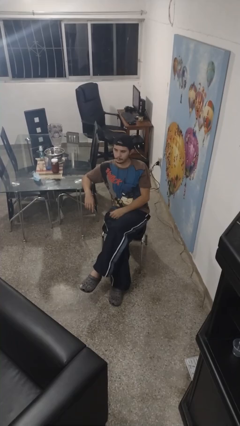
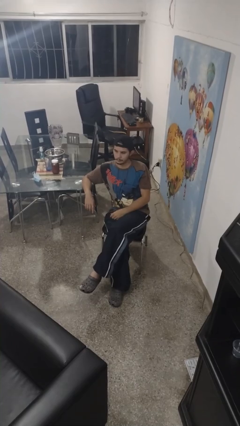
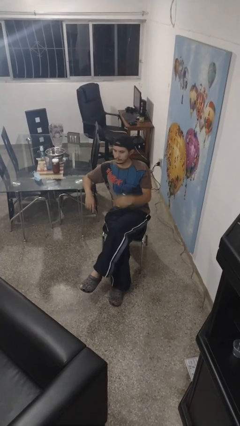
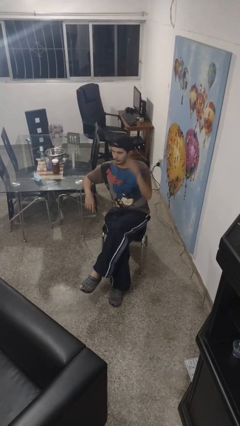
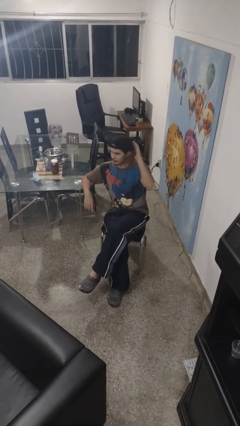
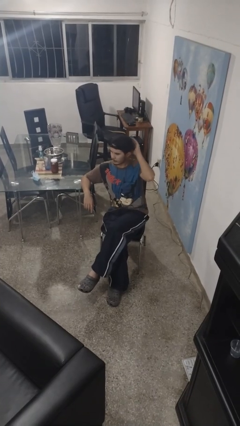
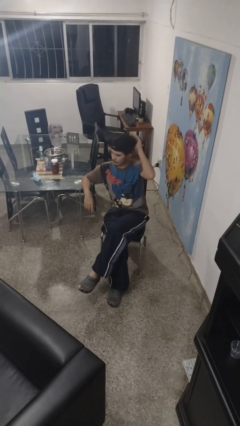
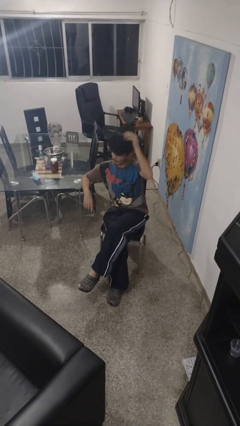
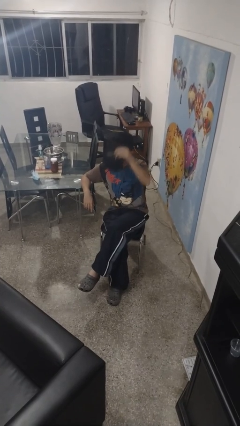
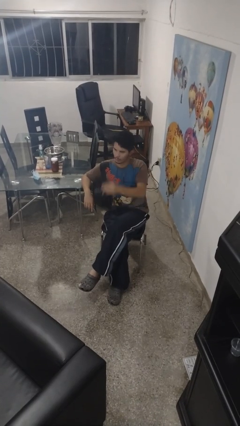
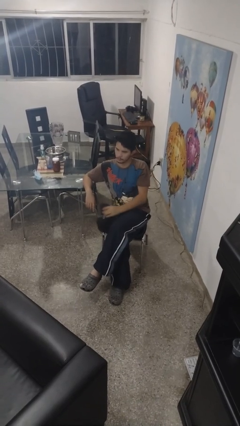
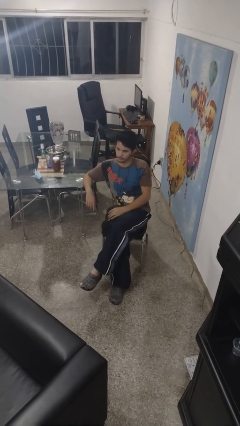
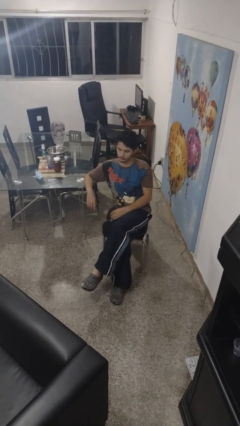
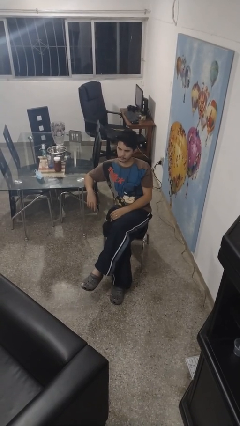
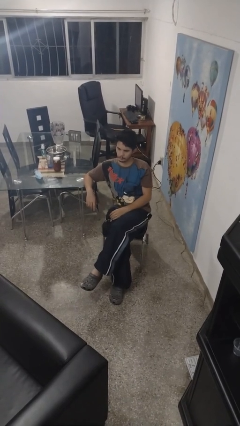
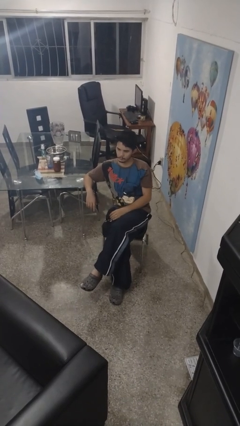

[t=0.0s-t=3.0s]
person takes off hat

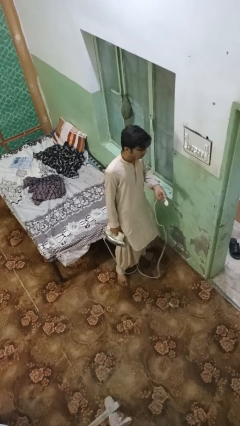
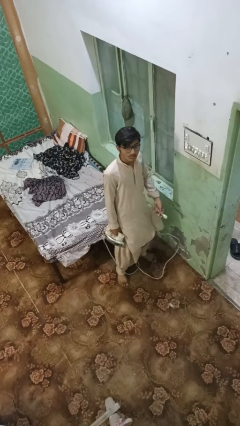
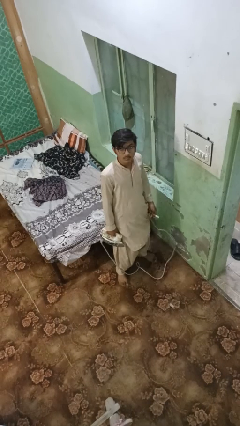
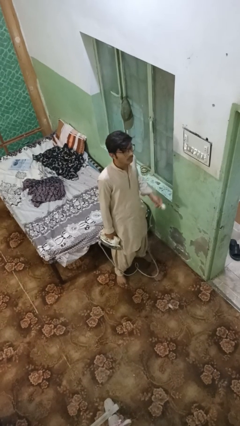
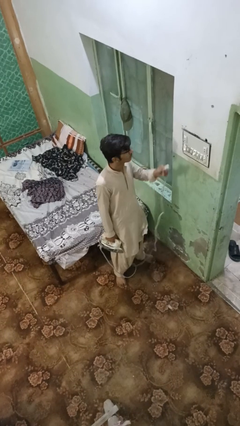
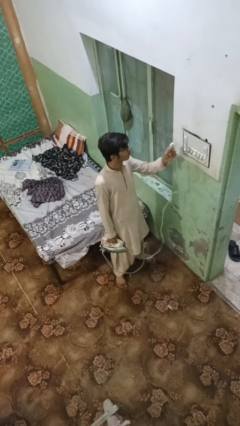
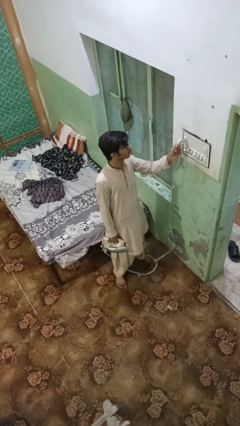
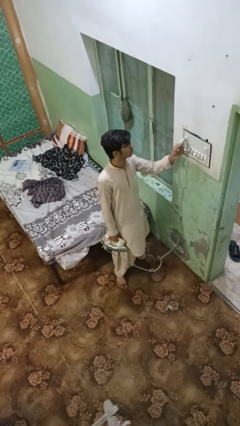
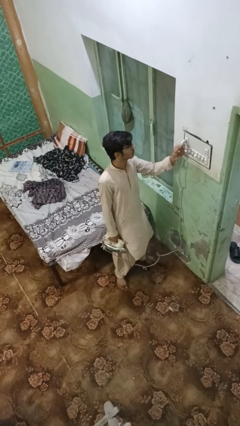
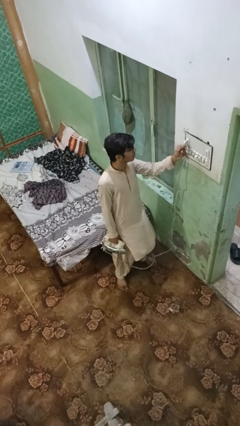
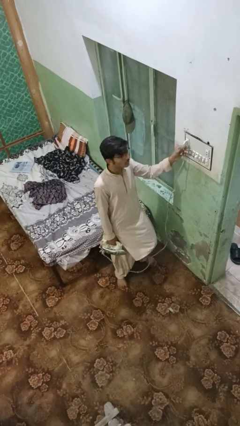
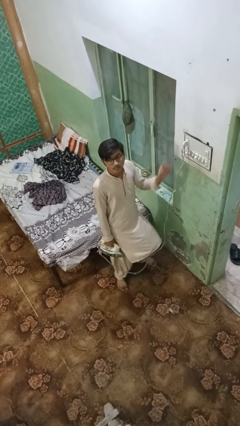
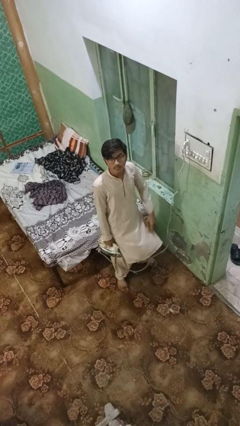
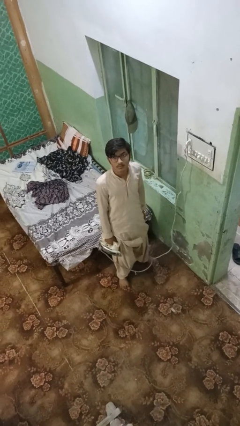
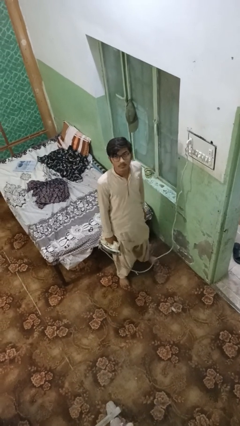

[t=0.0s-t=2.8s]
person plugs into electrical socket

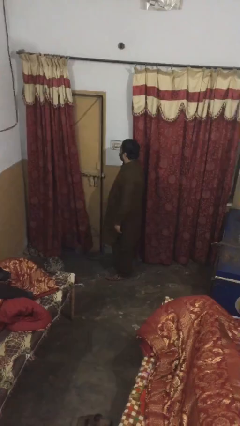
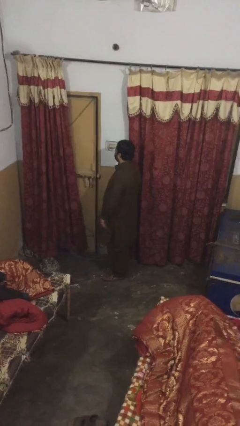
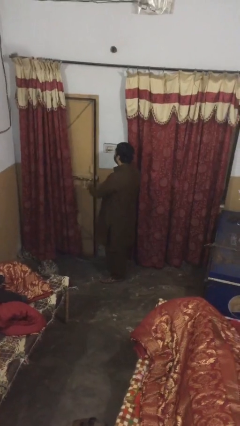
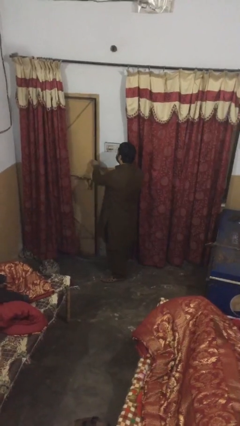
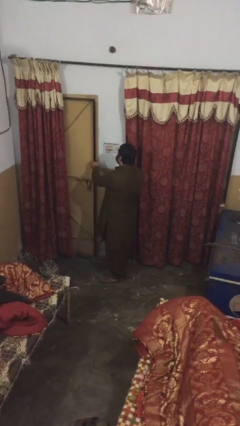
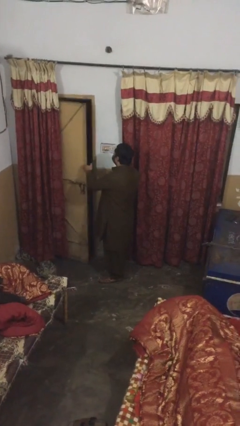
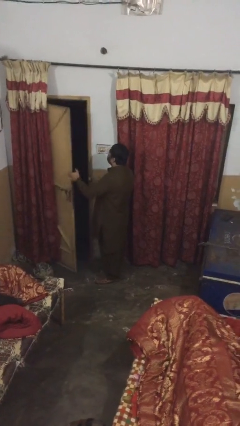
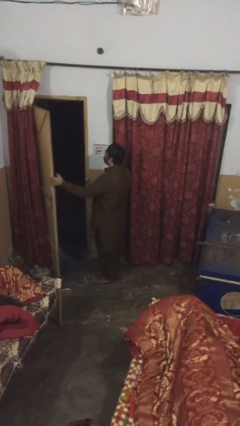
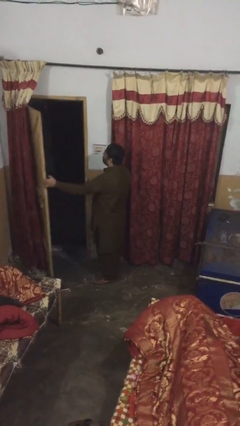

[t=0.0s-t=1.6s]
person opens facility door

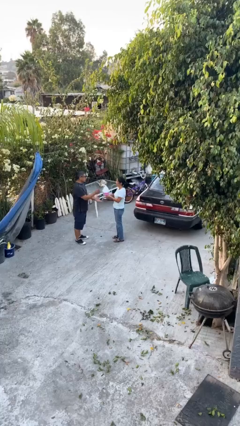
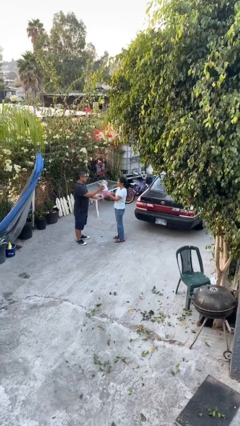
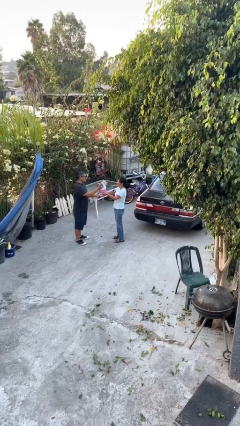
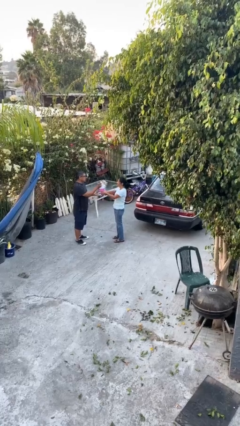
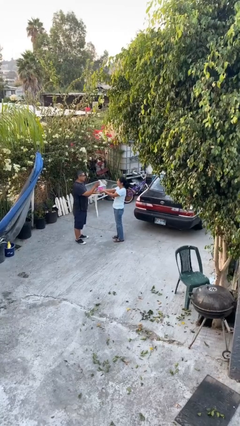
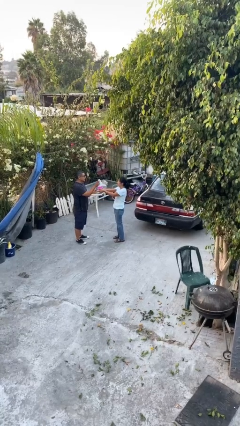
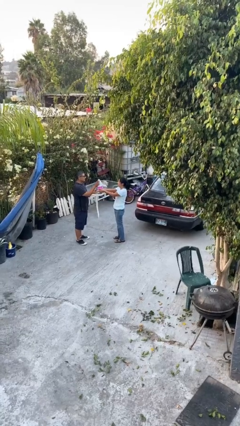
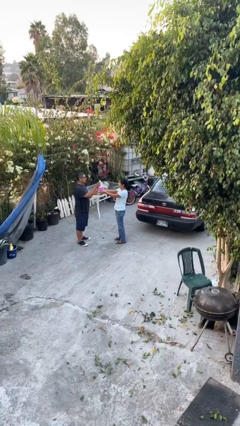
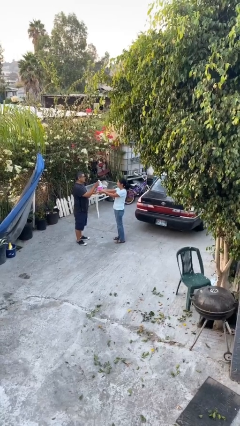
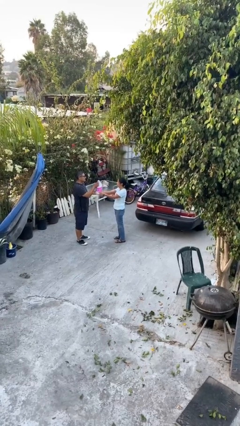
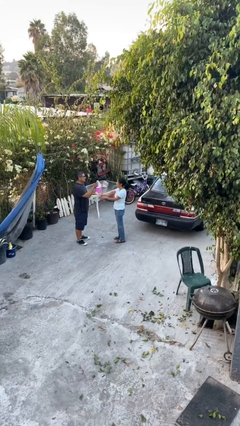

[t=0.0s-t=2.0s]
person transfers object to person

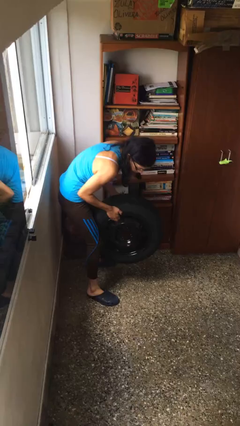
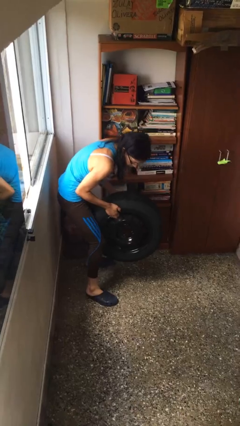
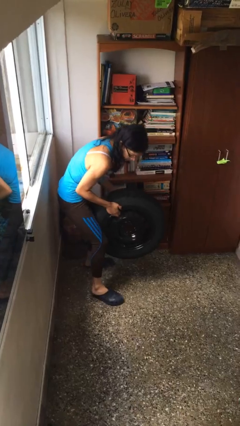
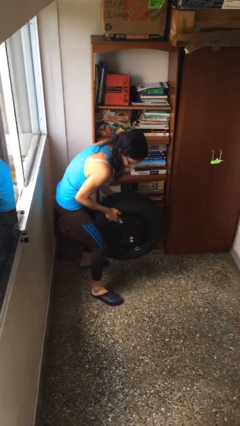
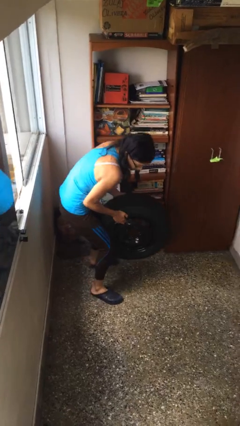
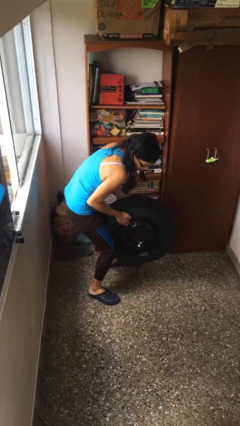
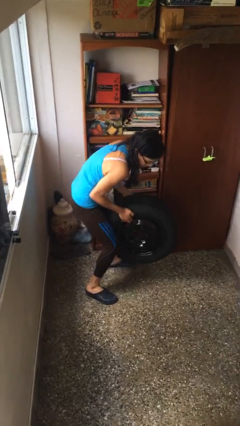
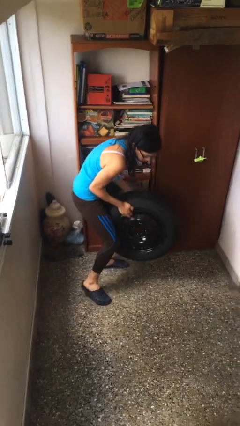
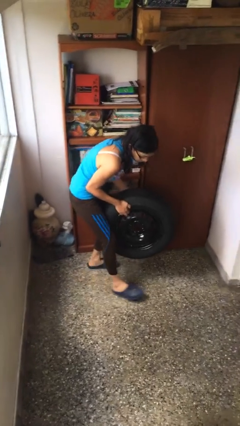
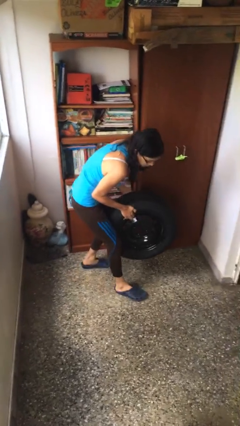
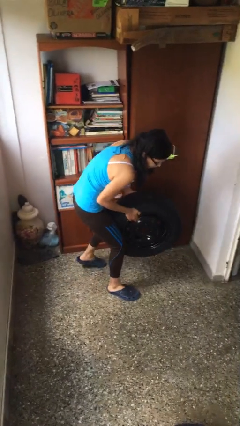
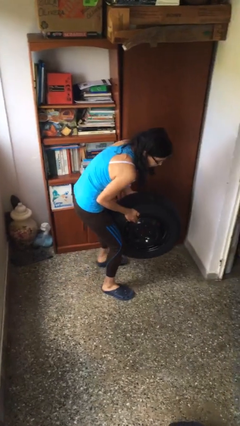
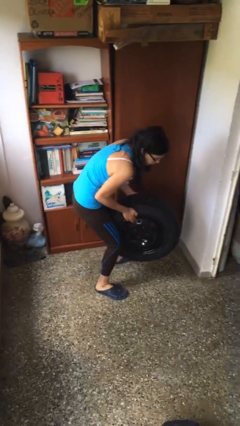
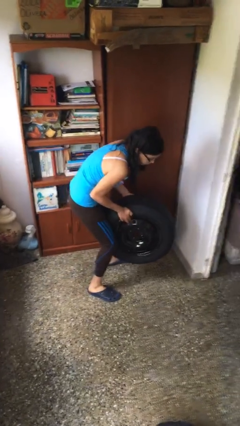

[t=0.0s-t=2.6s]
person carries heavy object

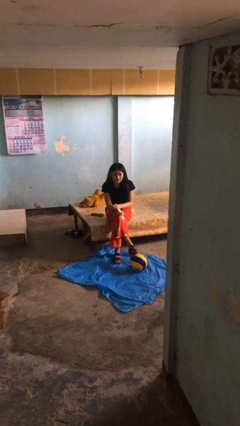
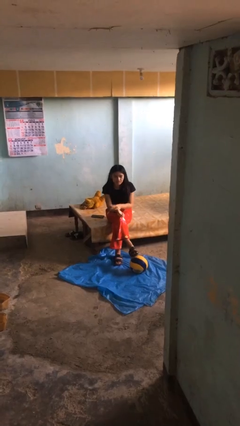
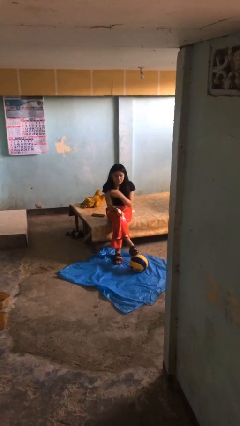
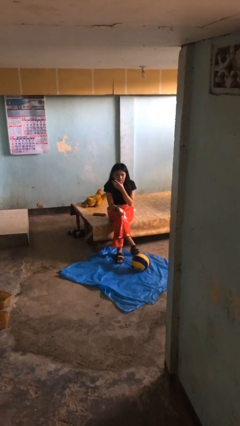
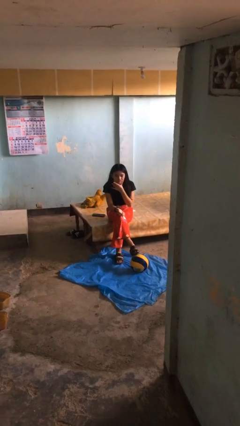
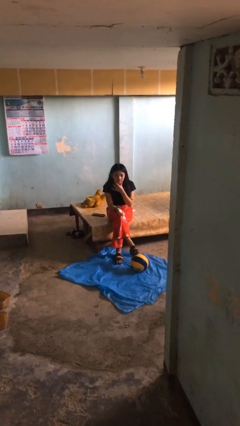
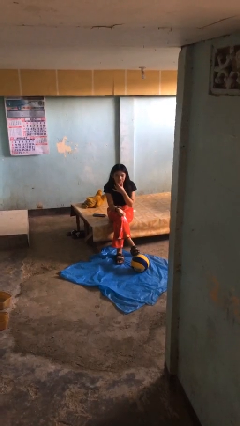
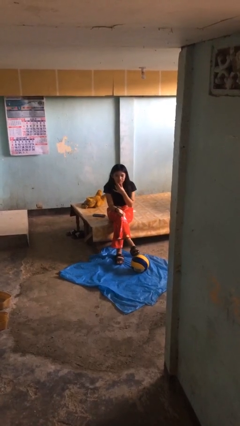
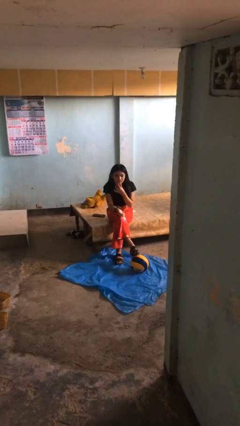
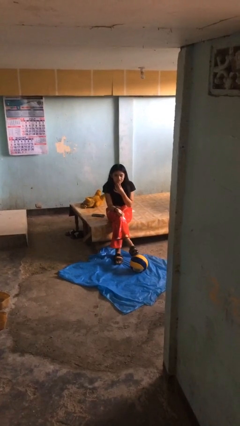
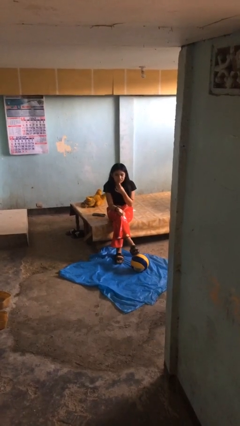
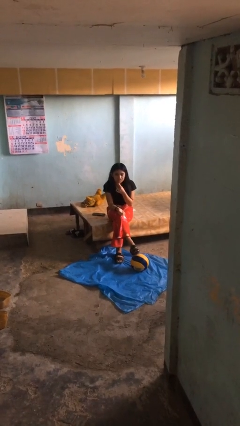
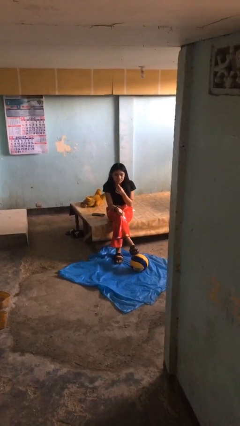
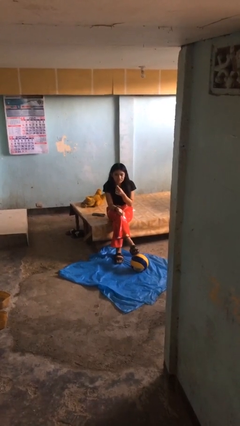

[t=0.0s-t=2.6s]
person strokes chin

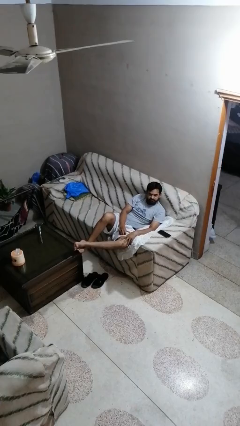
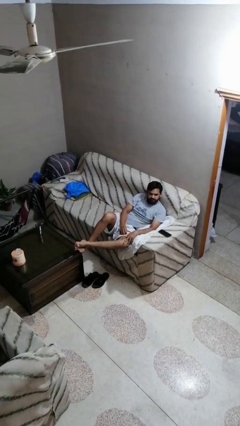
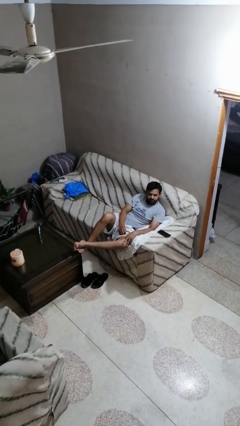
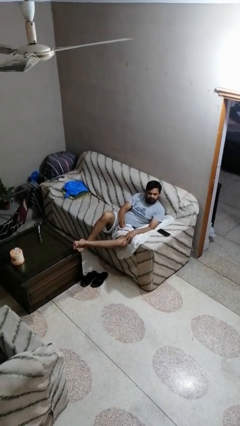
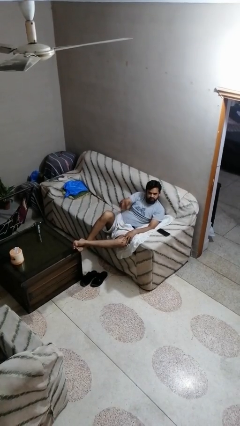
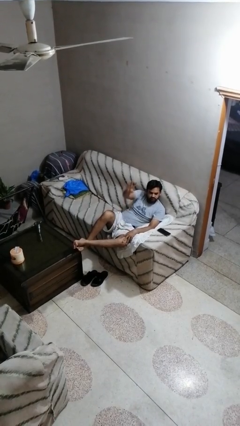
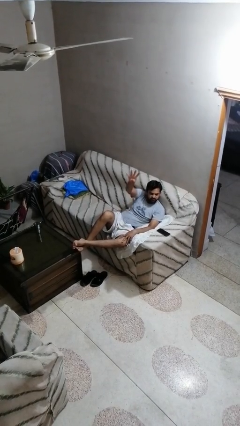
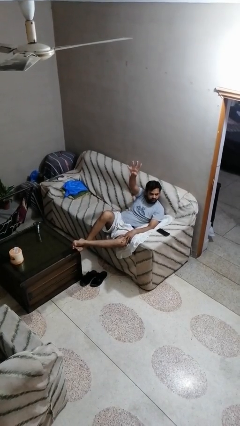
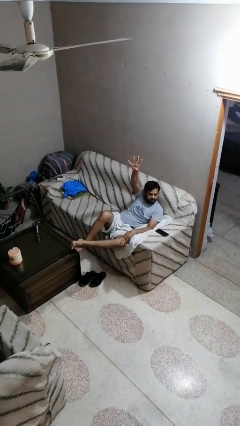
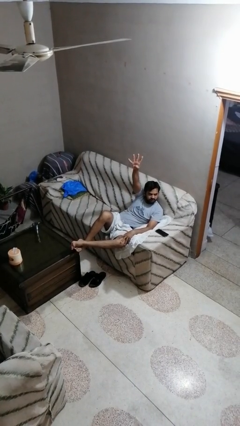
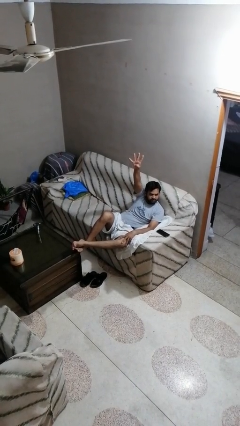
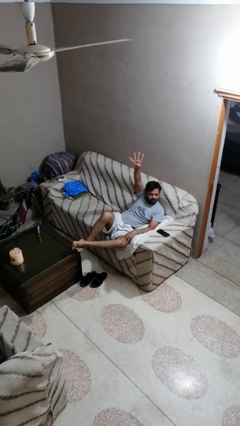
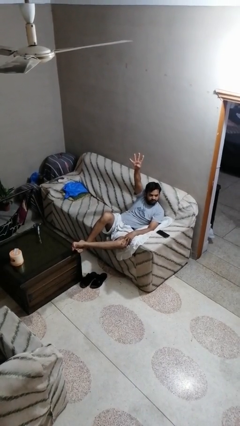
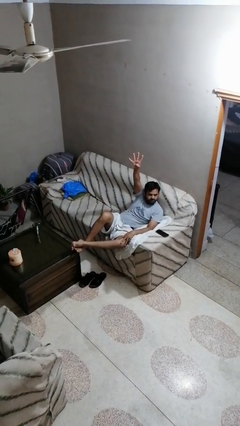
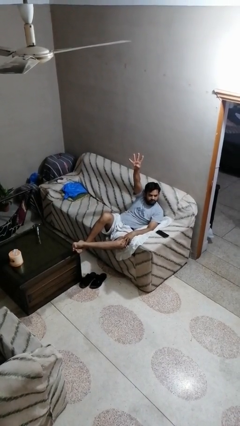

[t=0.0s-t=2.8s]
person gestures number four
